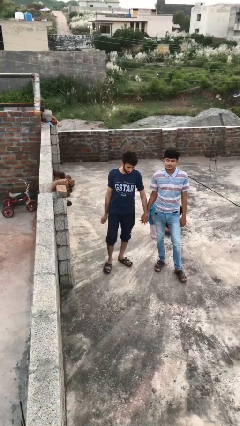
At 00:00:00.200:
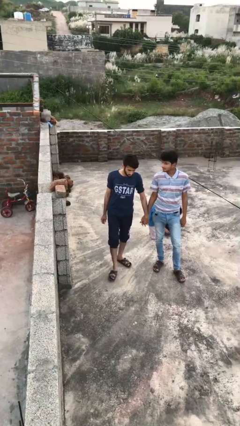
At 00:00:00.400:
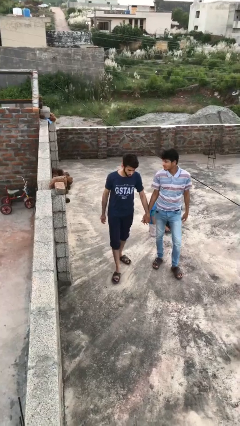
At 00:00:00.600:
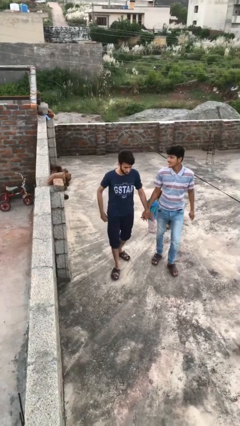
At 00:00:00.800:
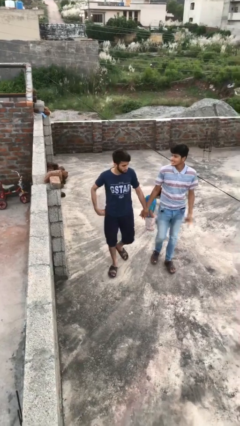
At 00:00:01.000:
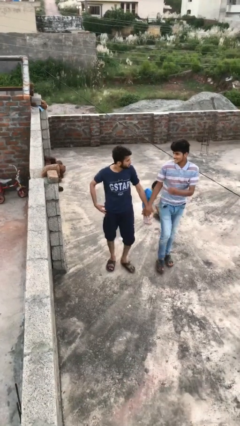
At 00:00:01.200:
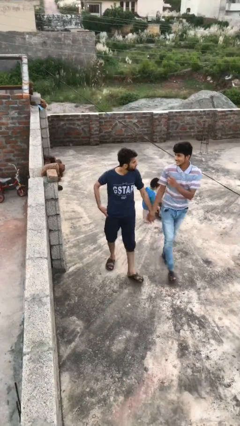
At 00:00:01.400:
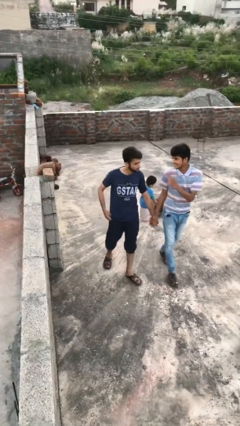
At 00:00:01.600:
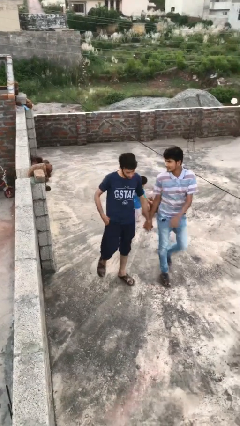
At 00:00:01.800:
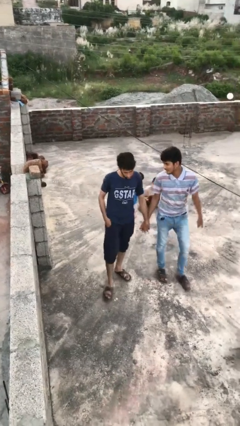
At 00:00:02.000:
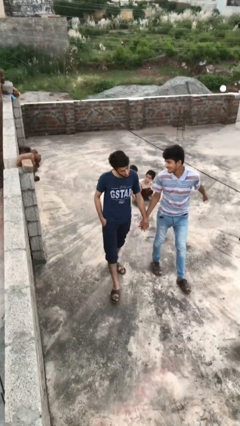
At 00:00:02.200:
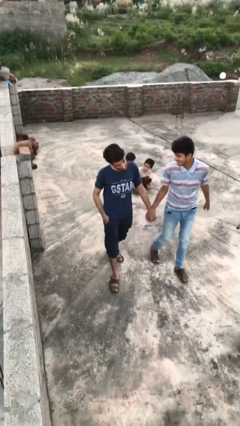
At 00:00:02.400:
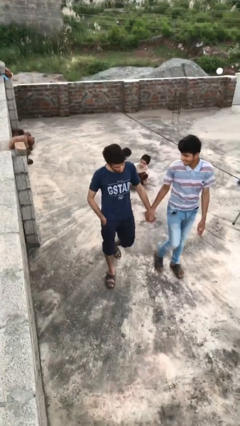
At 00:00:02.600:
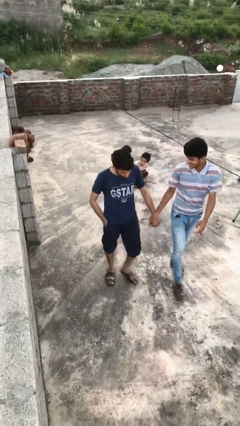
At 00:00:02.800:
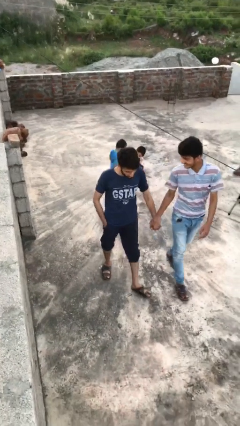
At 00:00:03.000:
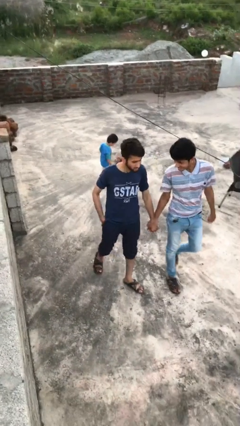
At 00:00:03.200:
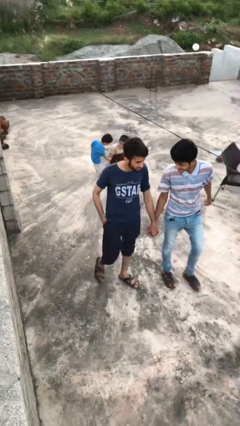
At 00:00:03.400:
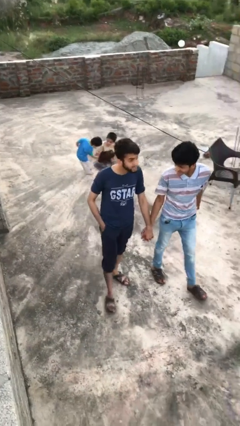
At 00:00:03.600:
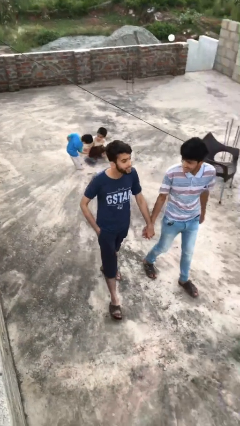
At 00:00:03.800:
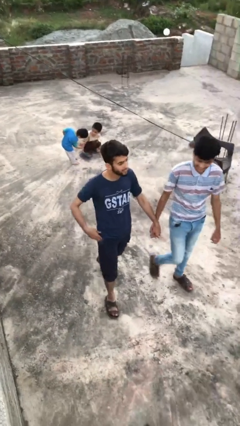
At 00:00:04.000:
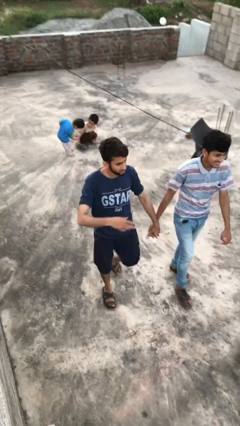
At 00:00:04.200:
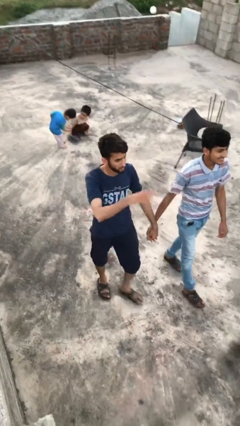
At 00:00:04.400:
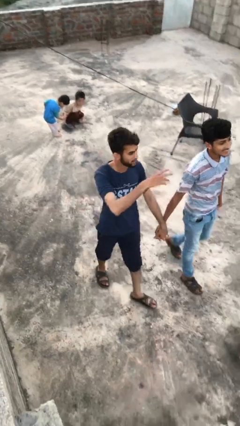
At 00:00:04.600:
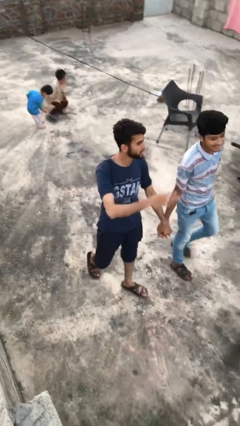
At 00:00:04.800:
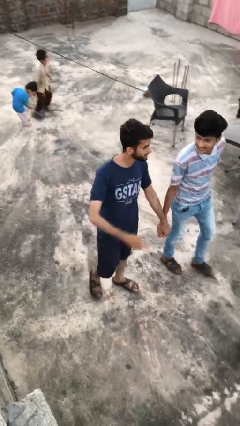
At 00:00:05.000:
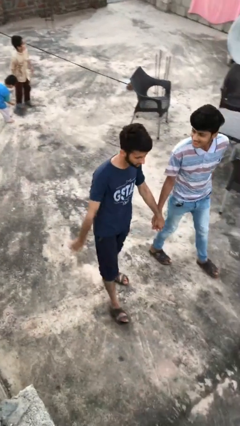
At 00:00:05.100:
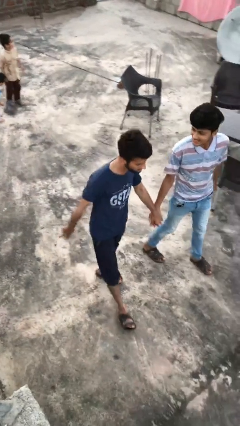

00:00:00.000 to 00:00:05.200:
person holds hand

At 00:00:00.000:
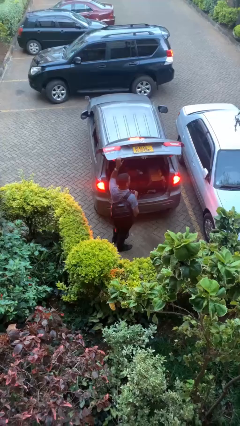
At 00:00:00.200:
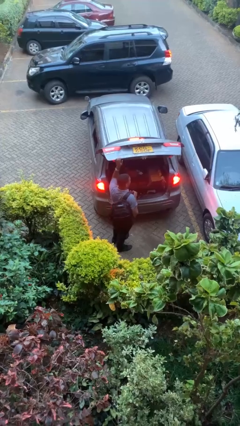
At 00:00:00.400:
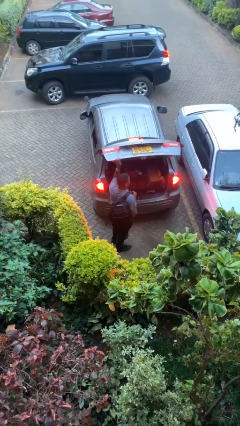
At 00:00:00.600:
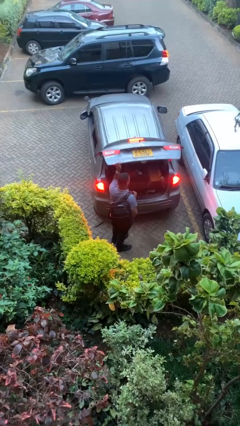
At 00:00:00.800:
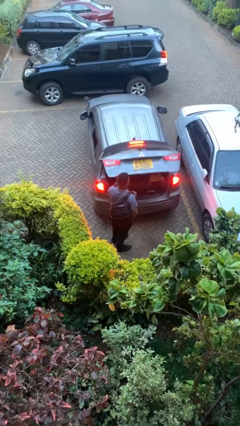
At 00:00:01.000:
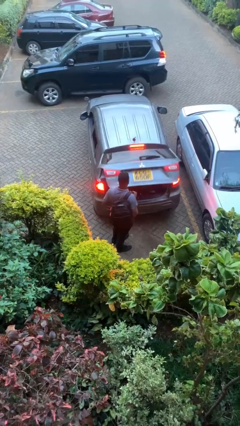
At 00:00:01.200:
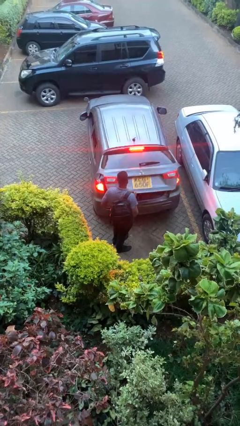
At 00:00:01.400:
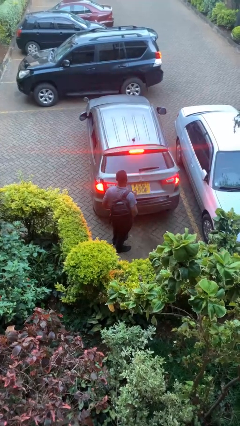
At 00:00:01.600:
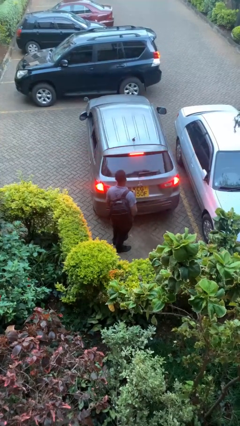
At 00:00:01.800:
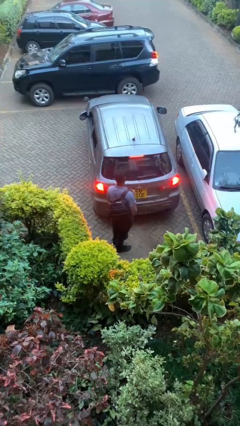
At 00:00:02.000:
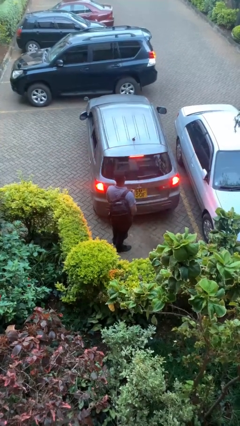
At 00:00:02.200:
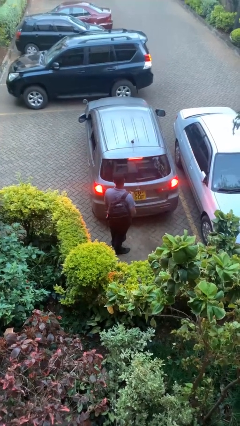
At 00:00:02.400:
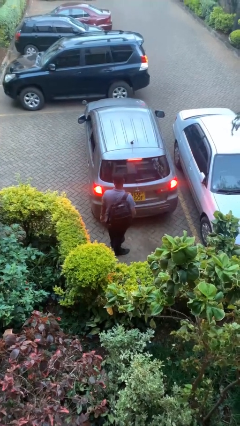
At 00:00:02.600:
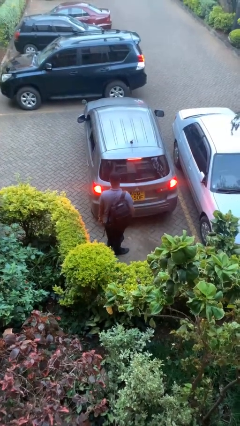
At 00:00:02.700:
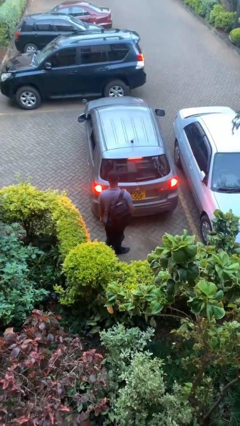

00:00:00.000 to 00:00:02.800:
person closes car trunk

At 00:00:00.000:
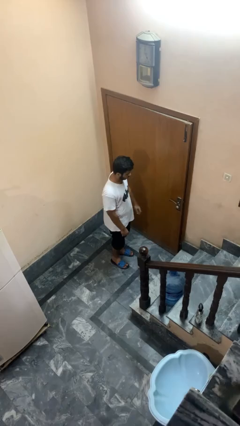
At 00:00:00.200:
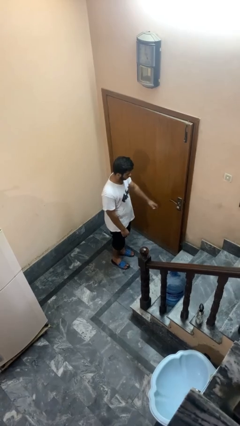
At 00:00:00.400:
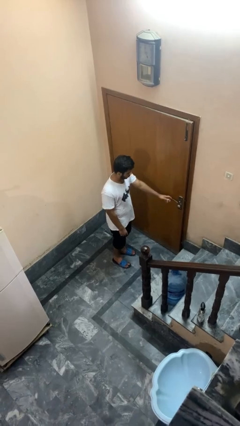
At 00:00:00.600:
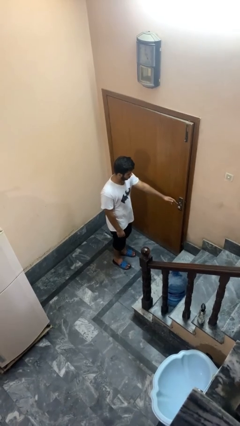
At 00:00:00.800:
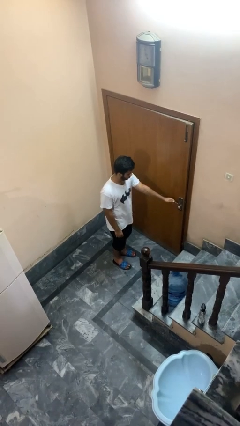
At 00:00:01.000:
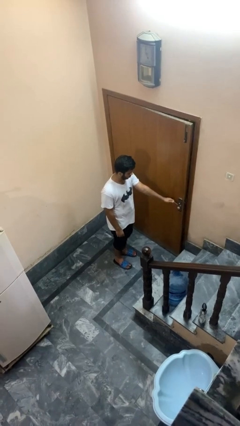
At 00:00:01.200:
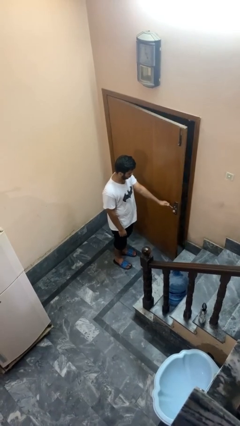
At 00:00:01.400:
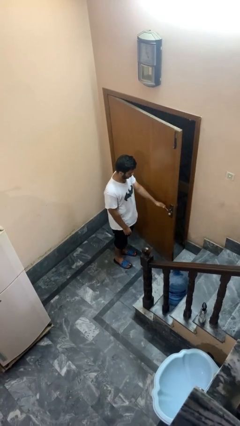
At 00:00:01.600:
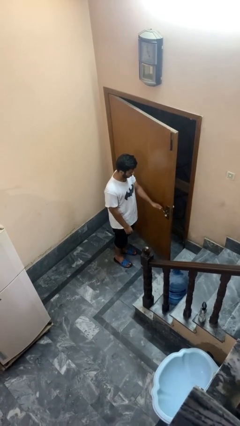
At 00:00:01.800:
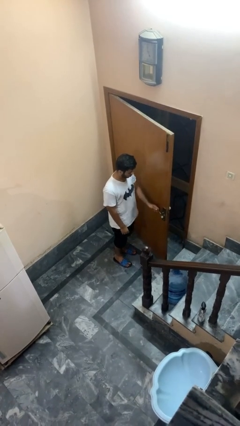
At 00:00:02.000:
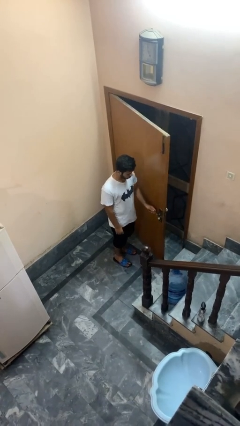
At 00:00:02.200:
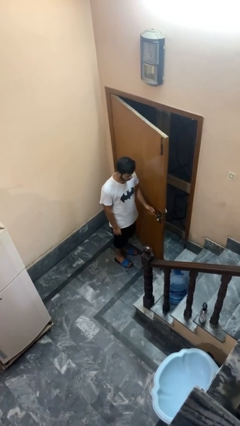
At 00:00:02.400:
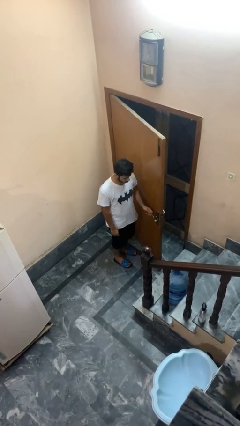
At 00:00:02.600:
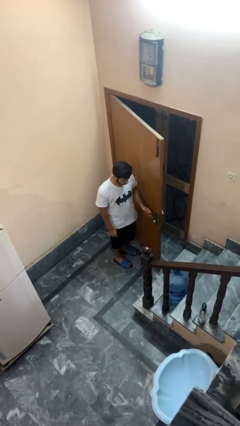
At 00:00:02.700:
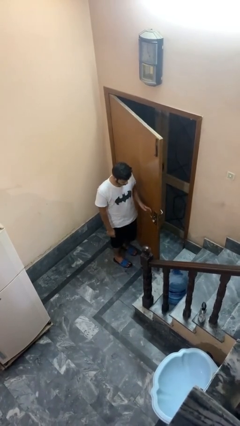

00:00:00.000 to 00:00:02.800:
person opens facility door

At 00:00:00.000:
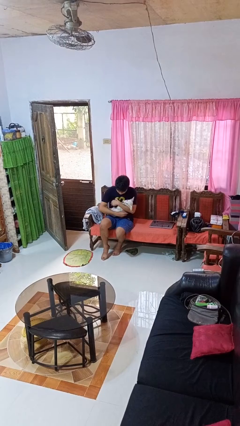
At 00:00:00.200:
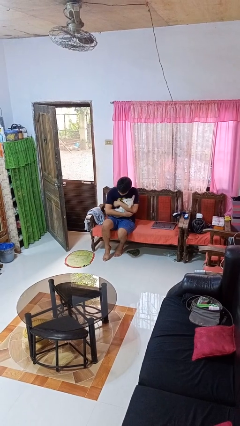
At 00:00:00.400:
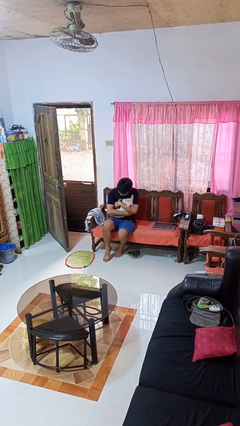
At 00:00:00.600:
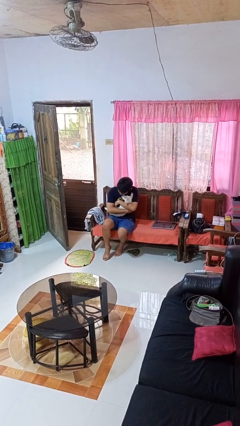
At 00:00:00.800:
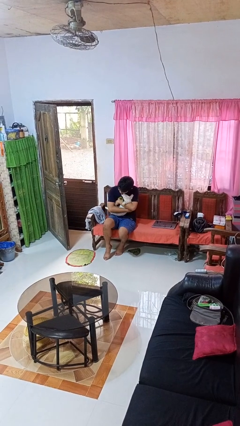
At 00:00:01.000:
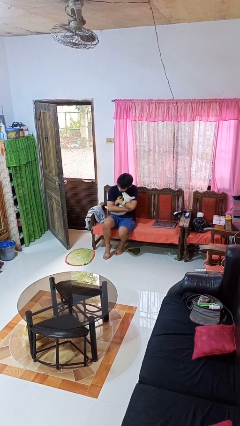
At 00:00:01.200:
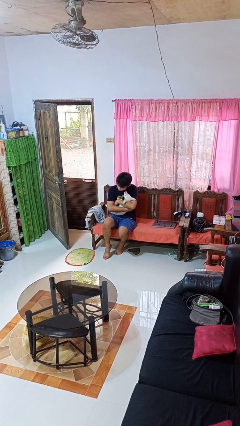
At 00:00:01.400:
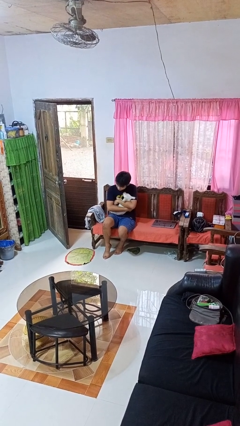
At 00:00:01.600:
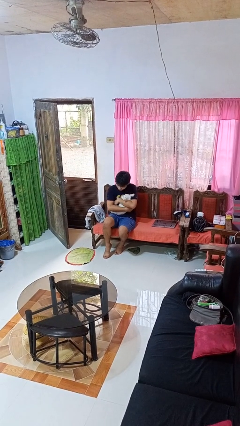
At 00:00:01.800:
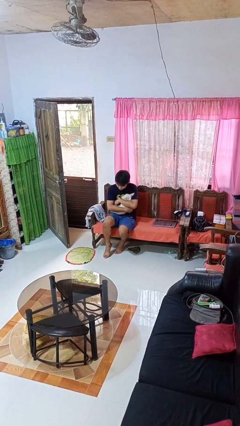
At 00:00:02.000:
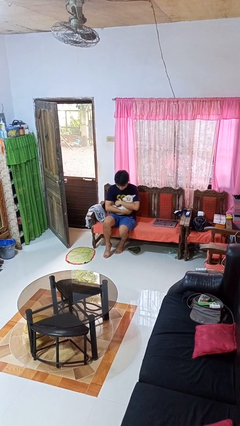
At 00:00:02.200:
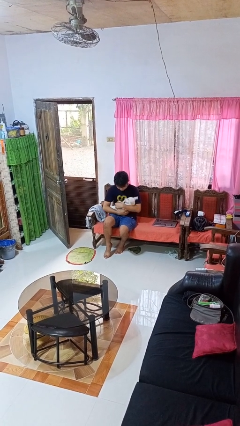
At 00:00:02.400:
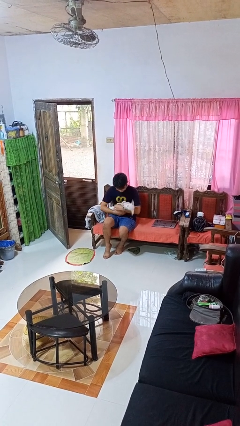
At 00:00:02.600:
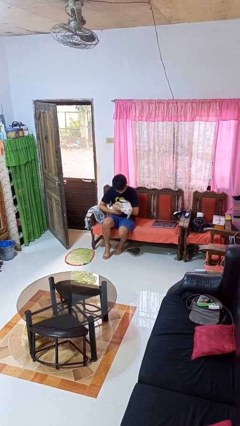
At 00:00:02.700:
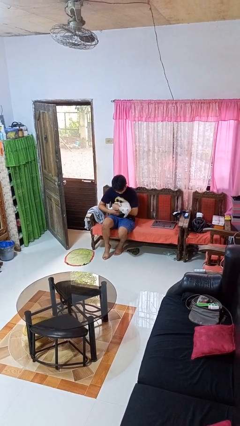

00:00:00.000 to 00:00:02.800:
person hugs dog

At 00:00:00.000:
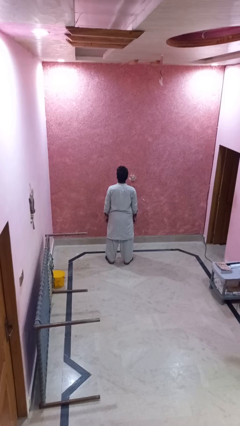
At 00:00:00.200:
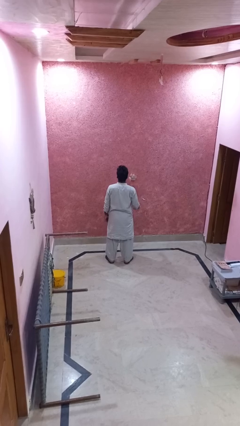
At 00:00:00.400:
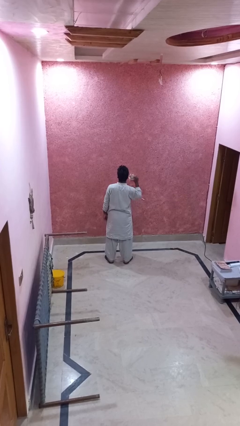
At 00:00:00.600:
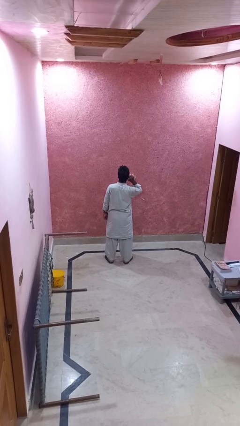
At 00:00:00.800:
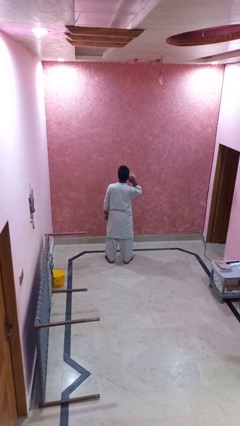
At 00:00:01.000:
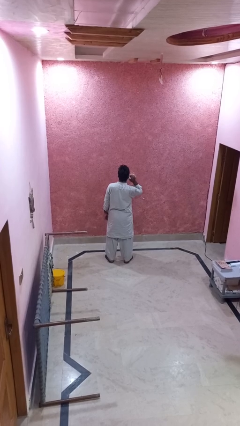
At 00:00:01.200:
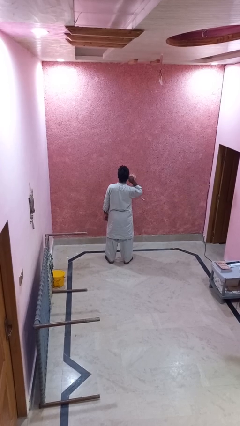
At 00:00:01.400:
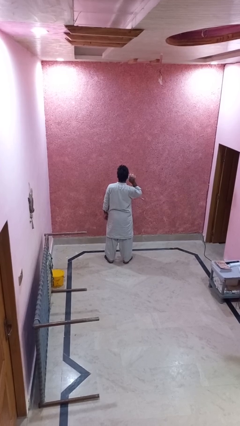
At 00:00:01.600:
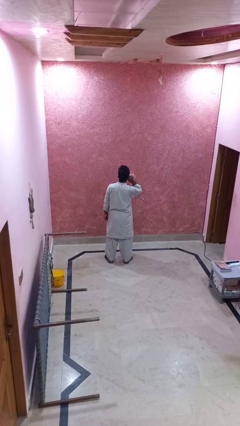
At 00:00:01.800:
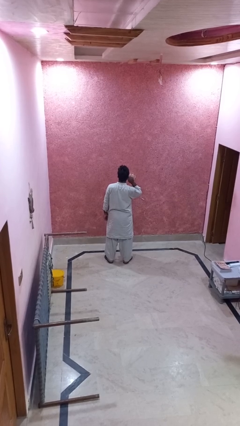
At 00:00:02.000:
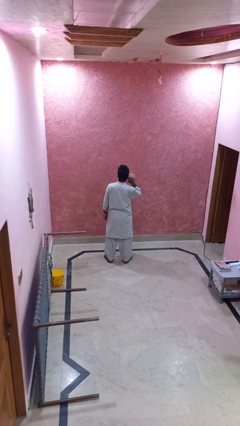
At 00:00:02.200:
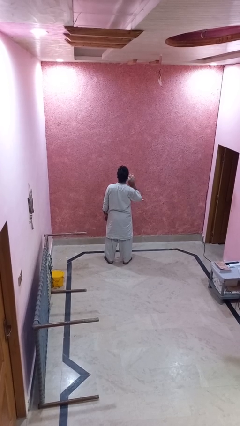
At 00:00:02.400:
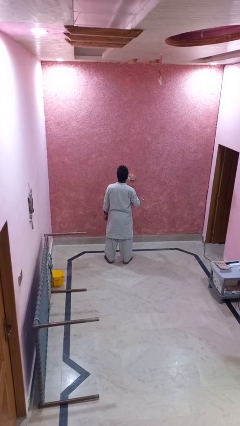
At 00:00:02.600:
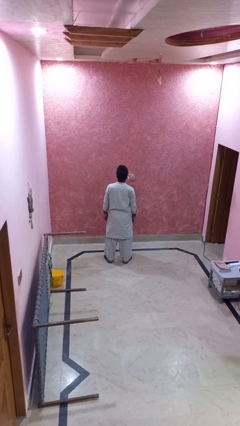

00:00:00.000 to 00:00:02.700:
person touches earlobe

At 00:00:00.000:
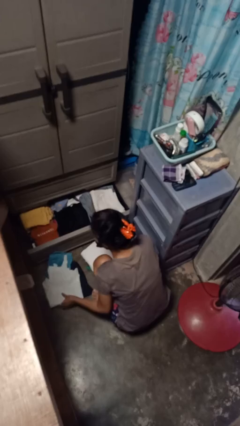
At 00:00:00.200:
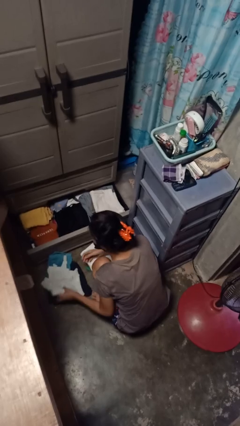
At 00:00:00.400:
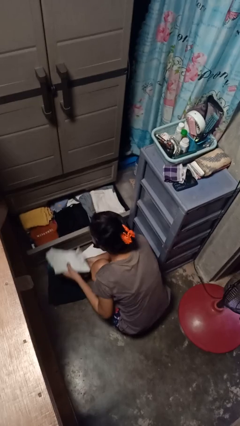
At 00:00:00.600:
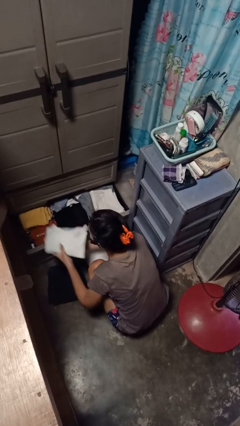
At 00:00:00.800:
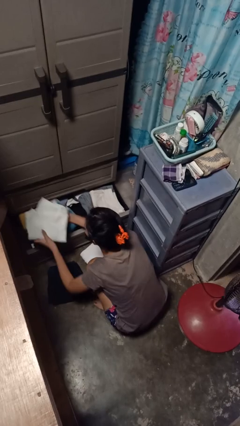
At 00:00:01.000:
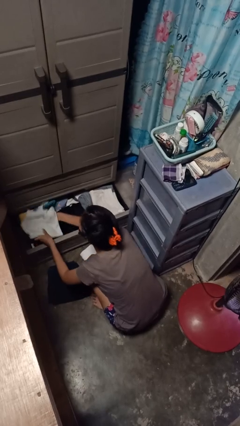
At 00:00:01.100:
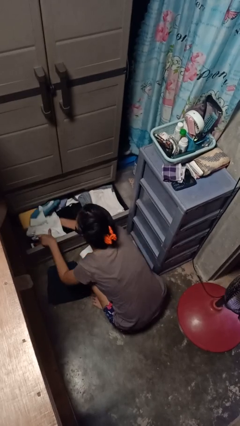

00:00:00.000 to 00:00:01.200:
person puts clothes into dresser
